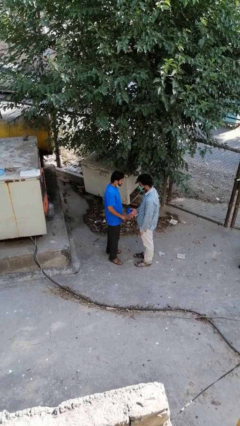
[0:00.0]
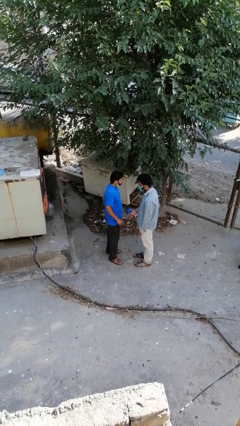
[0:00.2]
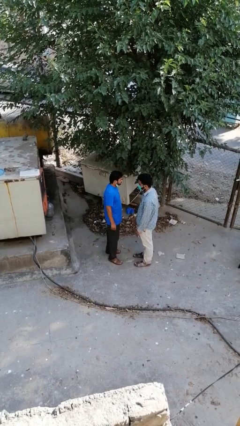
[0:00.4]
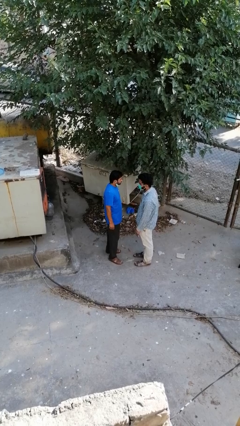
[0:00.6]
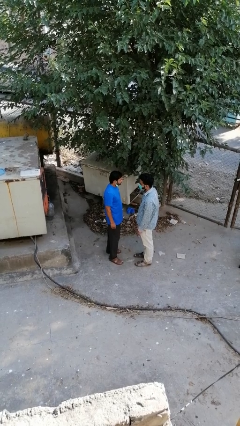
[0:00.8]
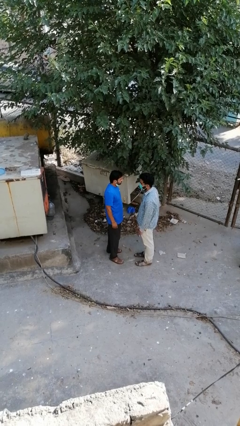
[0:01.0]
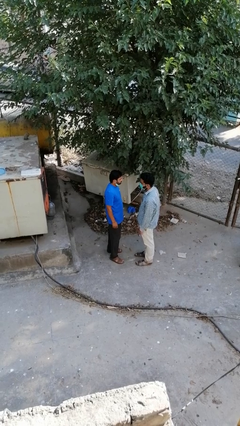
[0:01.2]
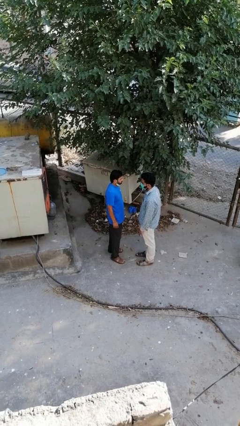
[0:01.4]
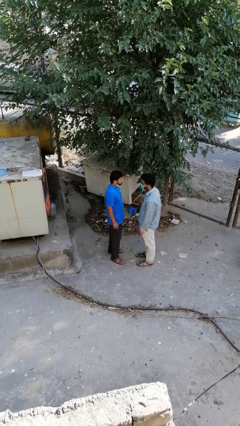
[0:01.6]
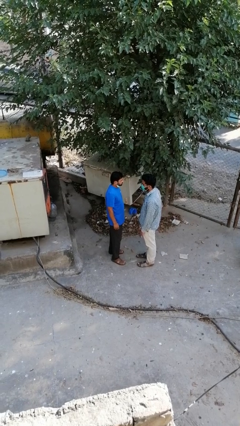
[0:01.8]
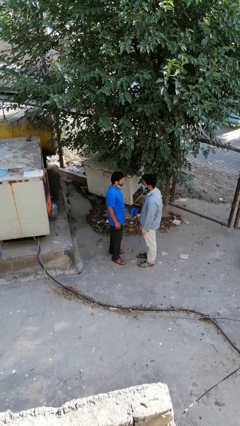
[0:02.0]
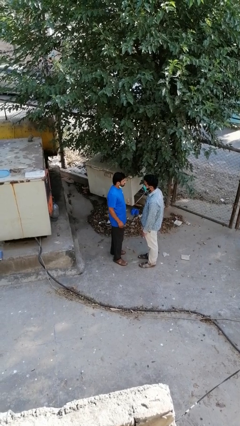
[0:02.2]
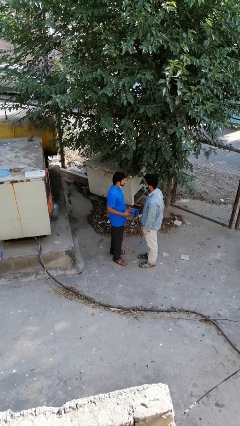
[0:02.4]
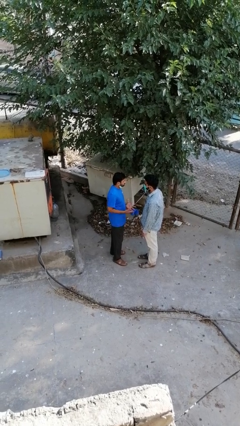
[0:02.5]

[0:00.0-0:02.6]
person highfives hand

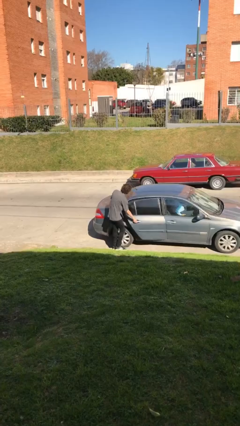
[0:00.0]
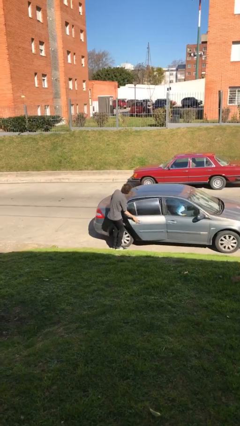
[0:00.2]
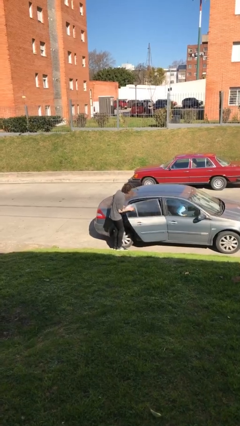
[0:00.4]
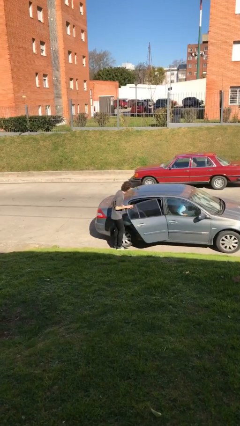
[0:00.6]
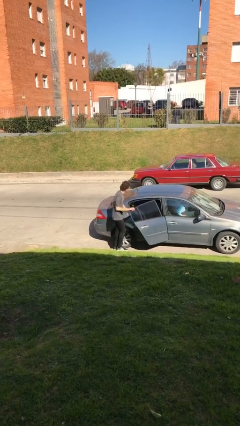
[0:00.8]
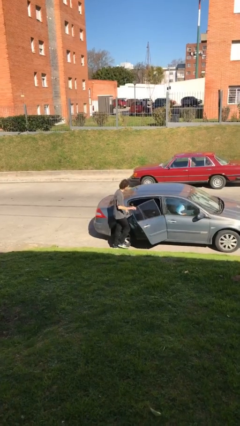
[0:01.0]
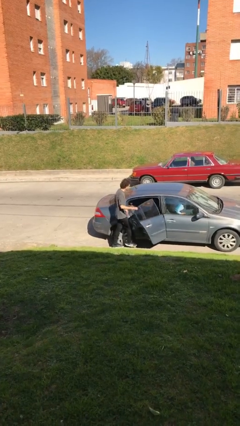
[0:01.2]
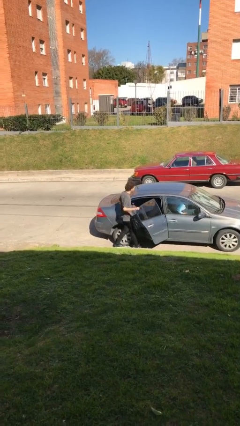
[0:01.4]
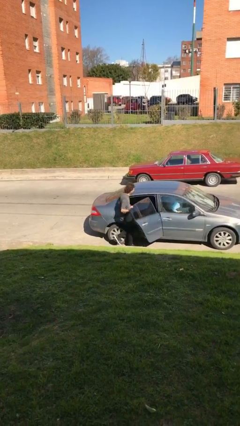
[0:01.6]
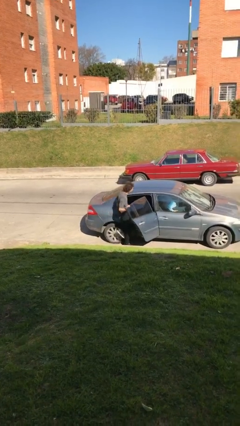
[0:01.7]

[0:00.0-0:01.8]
person opens car door

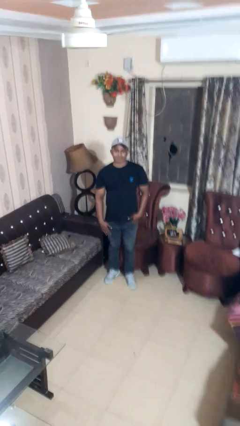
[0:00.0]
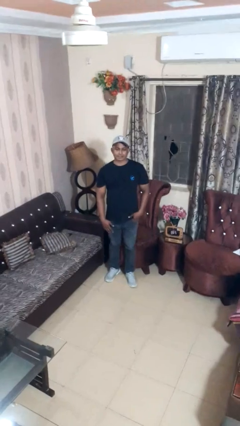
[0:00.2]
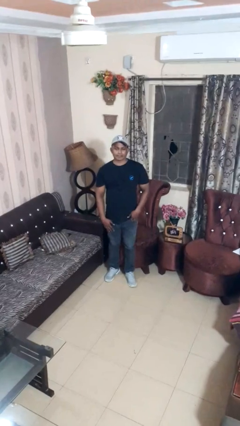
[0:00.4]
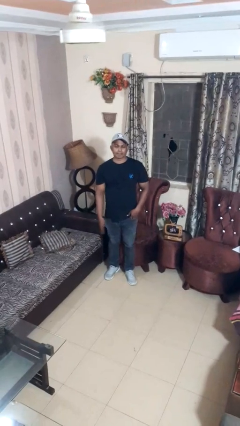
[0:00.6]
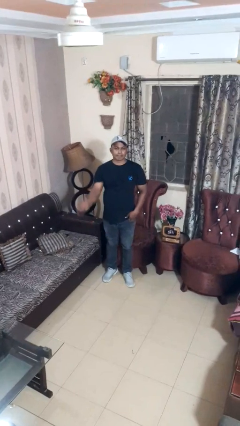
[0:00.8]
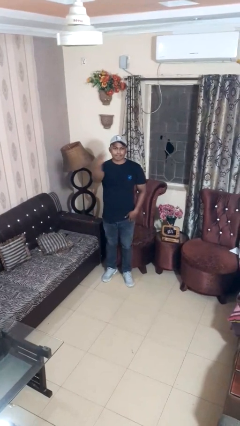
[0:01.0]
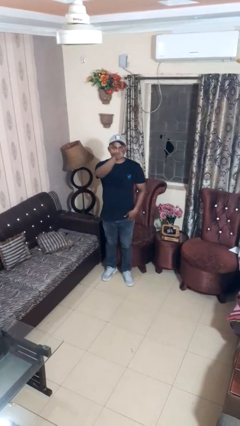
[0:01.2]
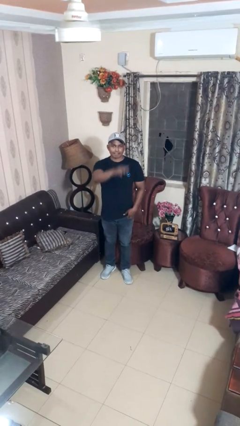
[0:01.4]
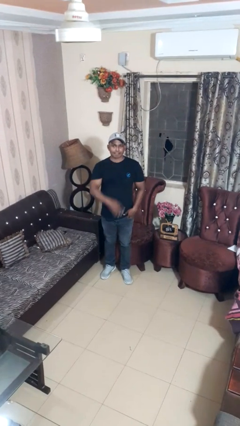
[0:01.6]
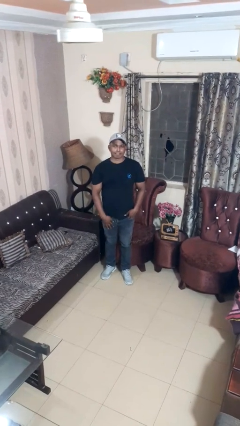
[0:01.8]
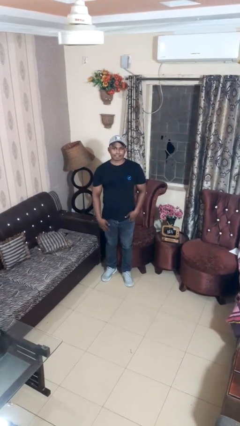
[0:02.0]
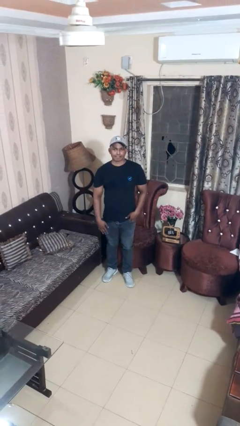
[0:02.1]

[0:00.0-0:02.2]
person gestures swipe right

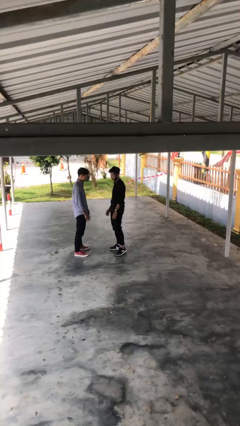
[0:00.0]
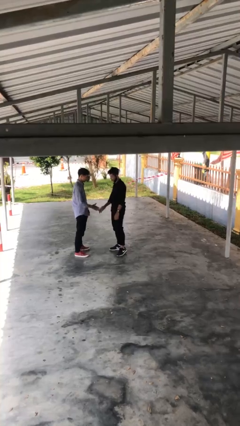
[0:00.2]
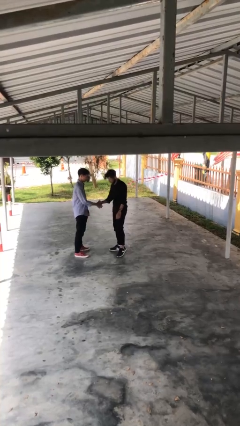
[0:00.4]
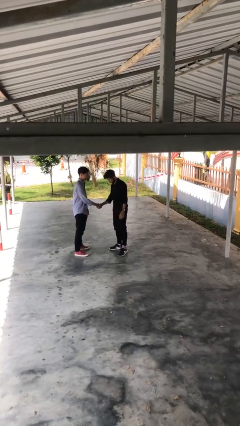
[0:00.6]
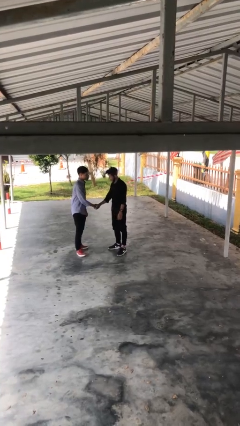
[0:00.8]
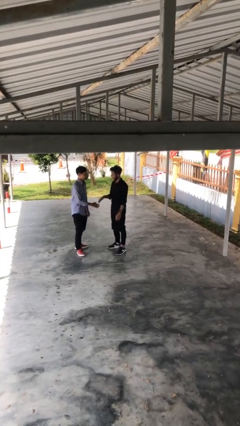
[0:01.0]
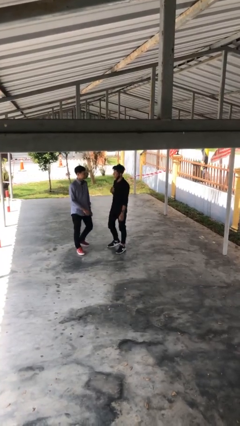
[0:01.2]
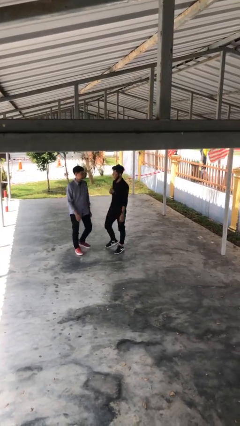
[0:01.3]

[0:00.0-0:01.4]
person shakes hand

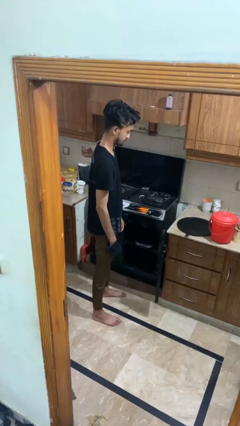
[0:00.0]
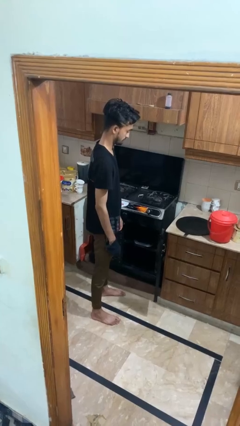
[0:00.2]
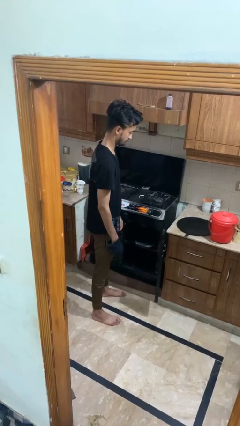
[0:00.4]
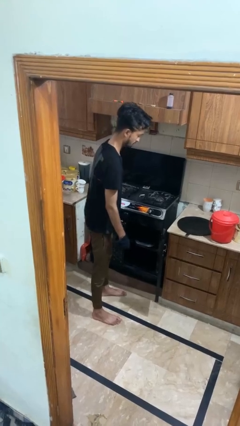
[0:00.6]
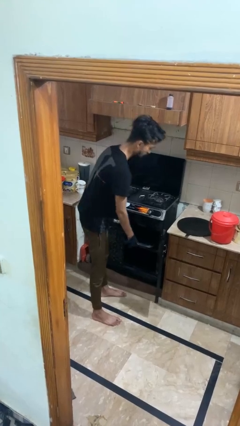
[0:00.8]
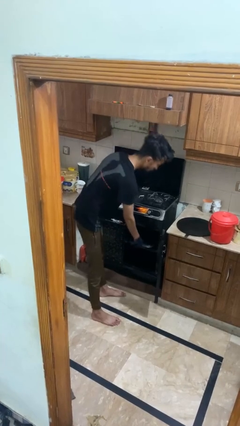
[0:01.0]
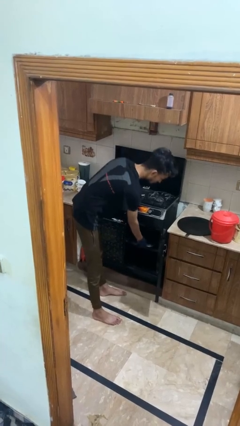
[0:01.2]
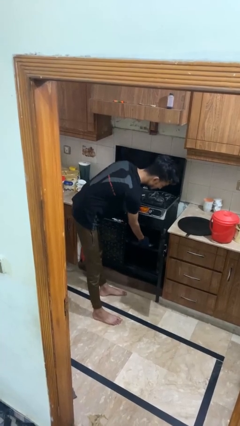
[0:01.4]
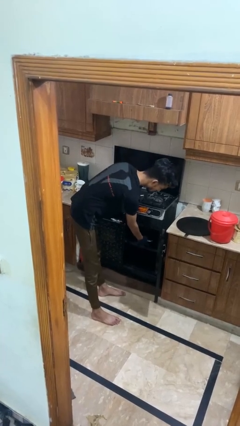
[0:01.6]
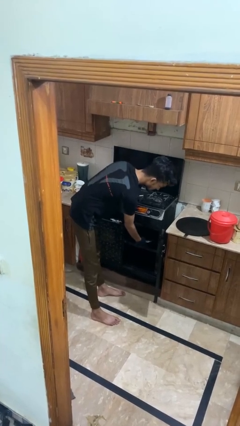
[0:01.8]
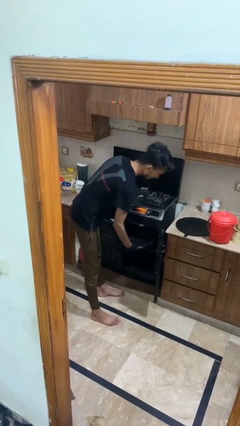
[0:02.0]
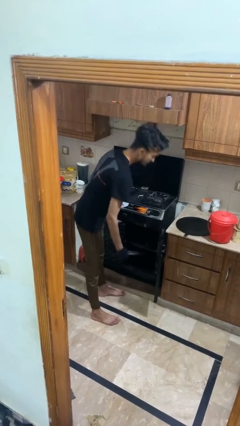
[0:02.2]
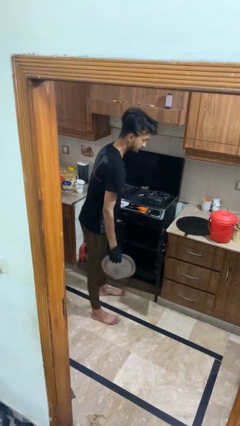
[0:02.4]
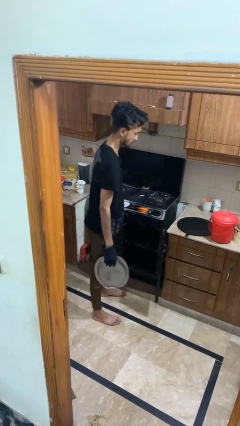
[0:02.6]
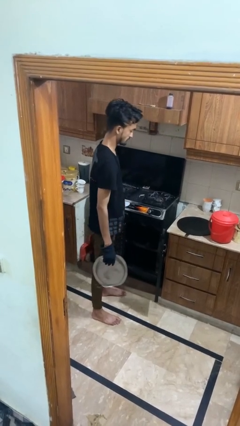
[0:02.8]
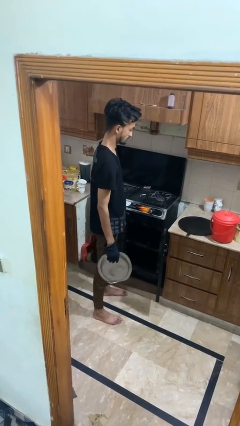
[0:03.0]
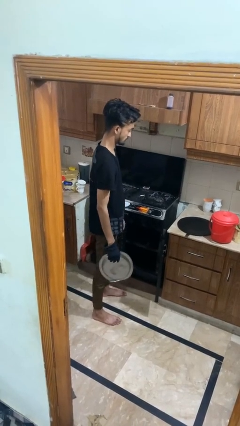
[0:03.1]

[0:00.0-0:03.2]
person takes object from oven

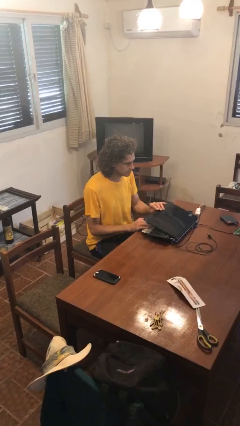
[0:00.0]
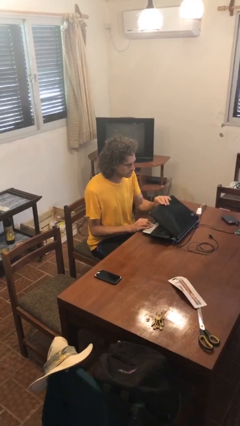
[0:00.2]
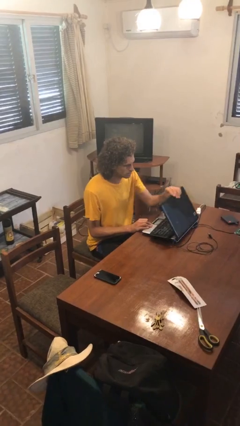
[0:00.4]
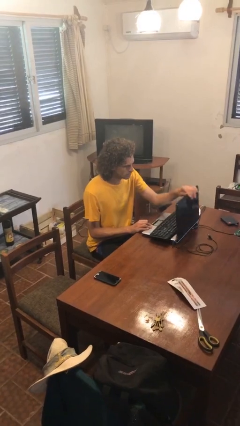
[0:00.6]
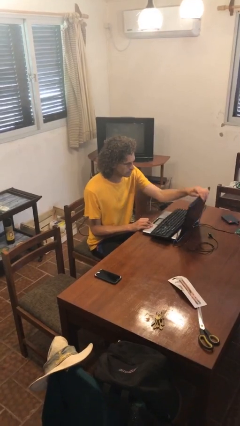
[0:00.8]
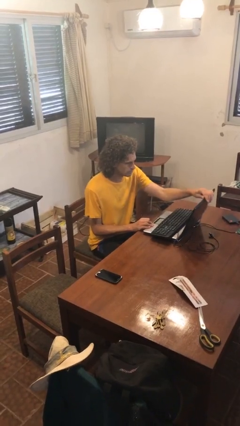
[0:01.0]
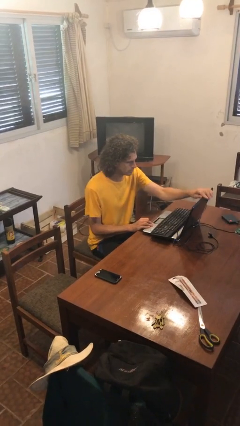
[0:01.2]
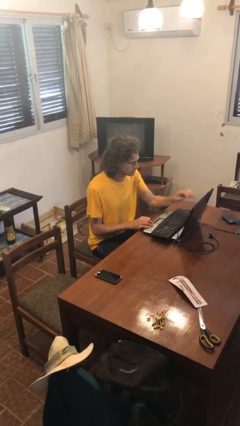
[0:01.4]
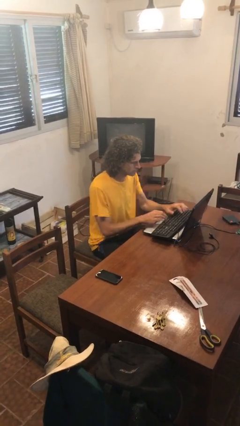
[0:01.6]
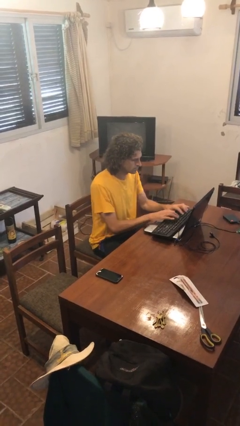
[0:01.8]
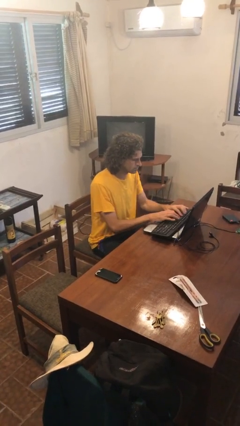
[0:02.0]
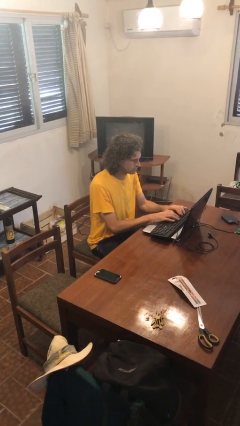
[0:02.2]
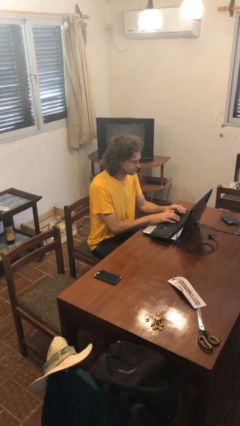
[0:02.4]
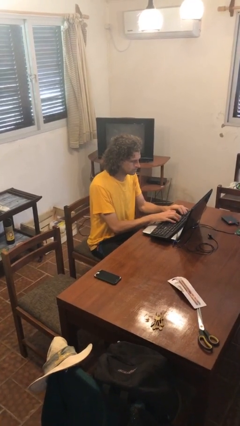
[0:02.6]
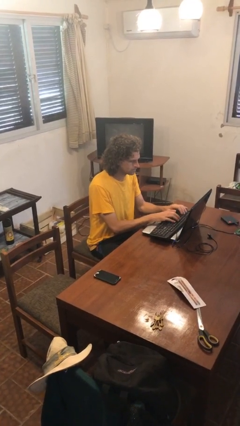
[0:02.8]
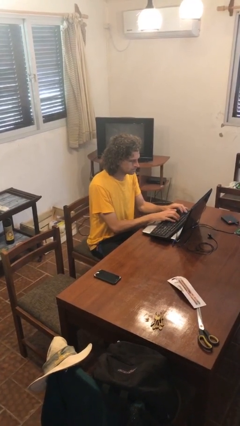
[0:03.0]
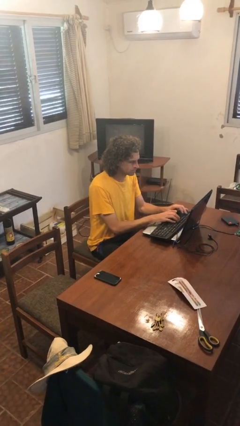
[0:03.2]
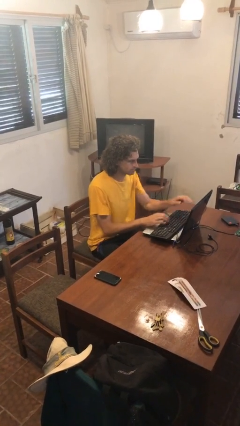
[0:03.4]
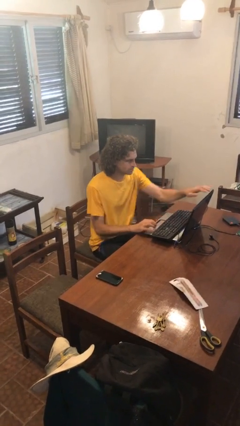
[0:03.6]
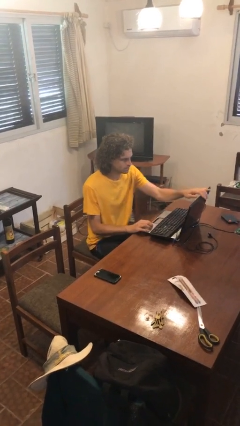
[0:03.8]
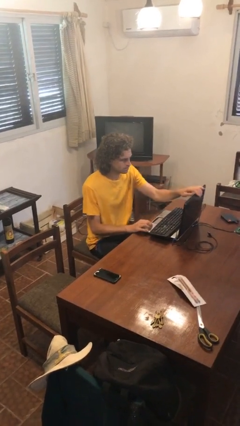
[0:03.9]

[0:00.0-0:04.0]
person interacts with laptop

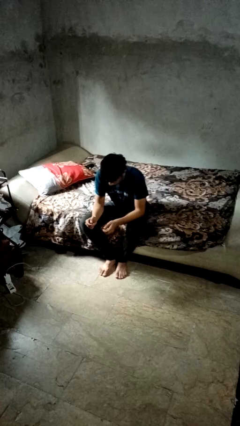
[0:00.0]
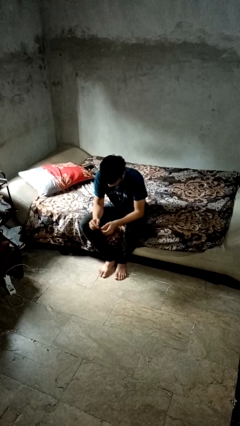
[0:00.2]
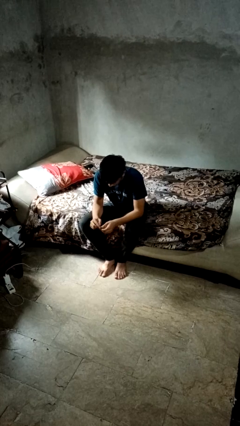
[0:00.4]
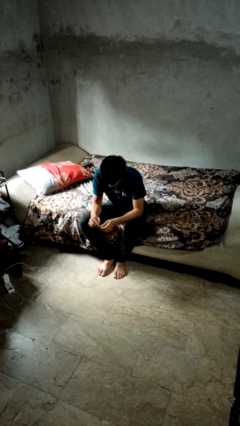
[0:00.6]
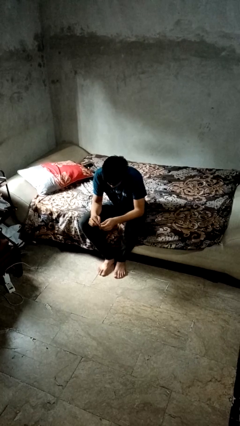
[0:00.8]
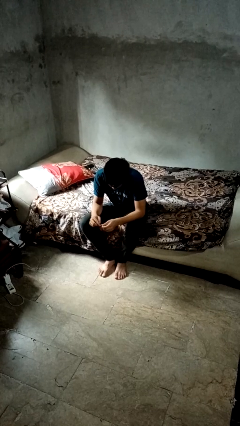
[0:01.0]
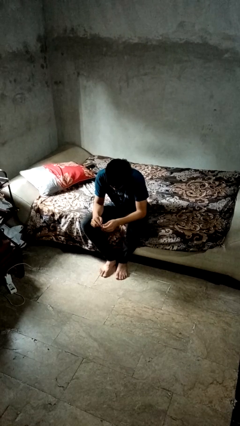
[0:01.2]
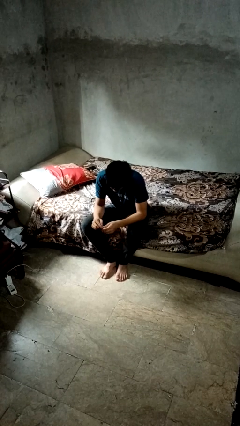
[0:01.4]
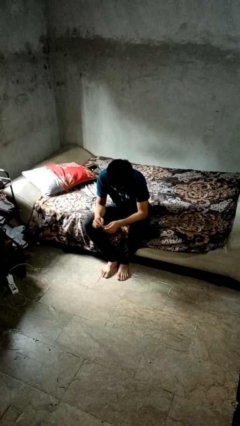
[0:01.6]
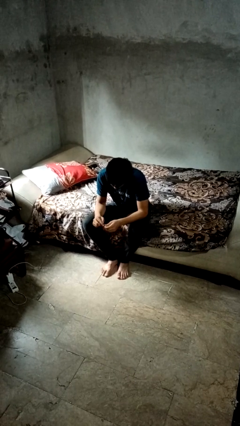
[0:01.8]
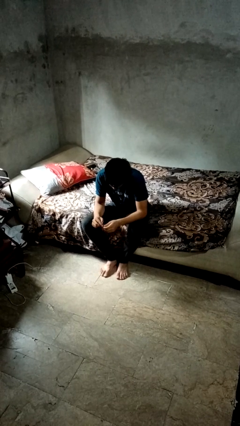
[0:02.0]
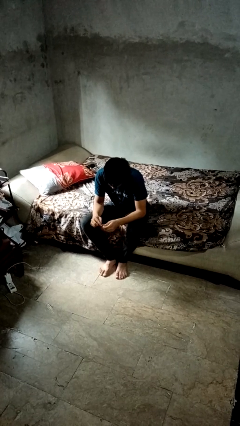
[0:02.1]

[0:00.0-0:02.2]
person files fingernails
